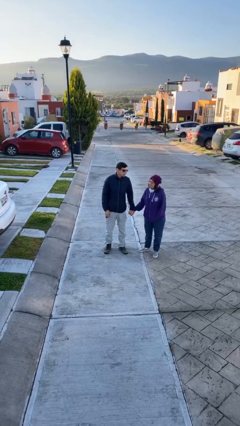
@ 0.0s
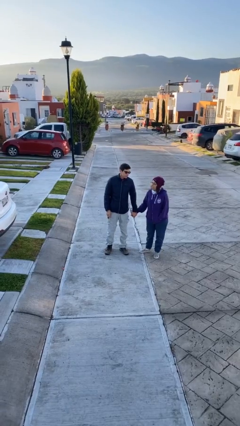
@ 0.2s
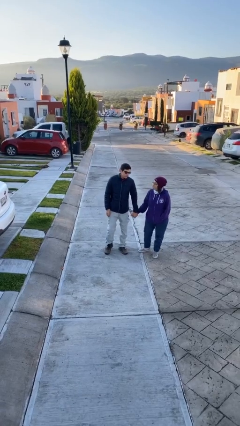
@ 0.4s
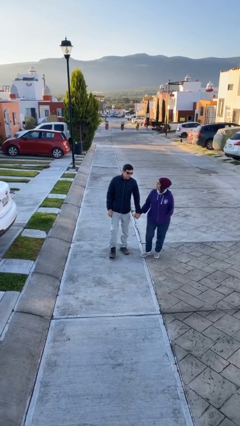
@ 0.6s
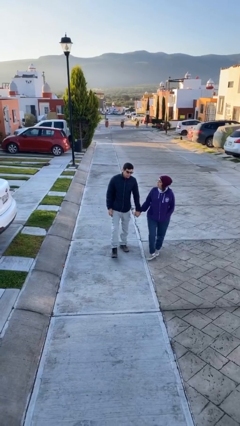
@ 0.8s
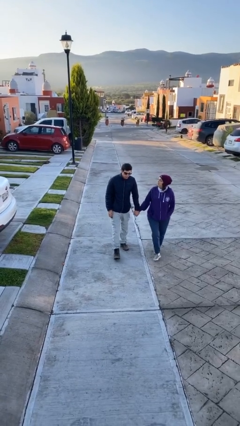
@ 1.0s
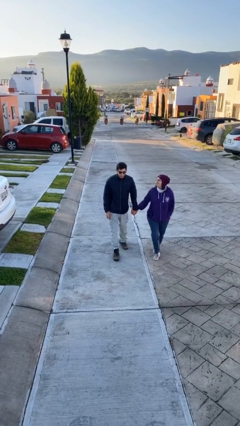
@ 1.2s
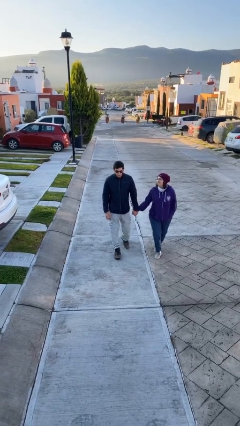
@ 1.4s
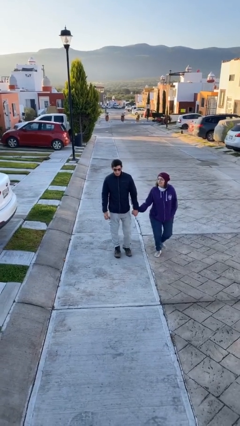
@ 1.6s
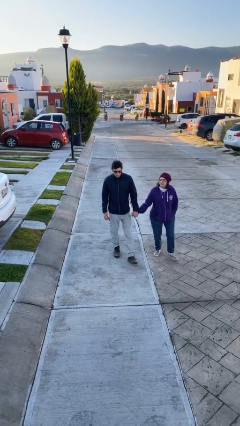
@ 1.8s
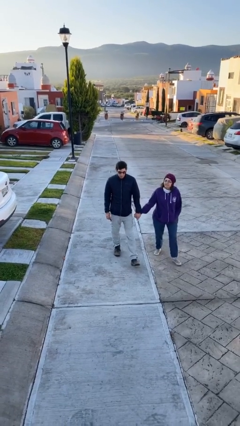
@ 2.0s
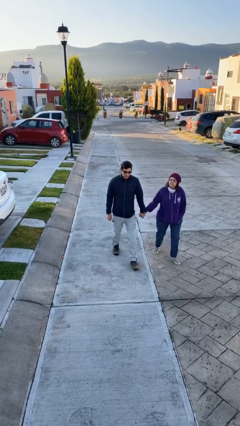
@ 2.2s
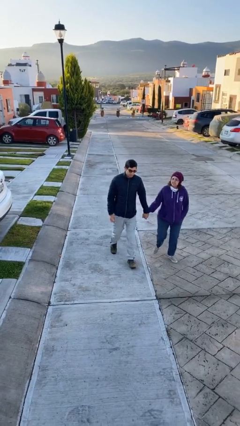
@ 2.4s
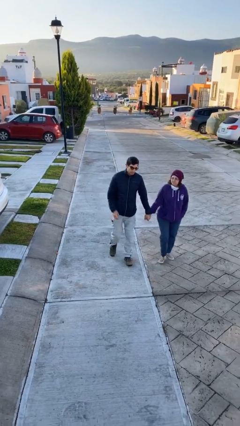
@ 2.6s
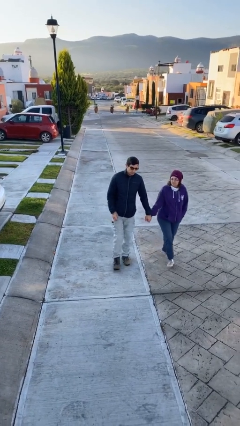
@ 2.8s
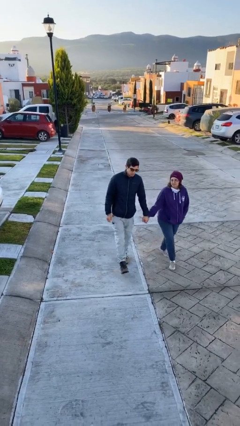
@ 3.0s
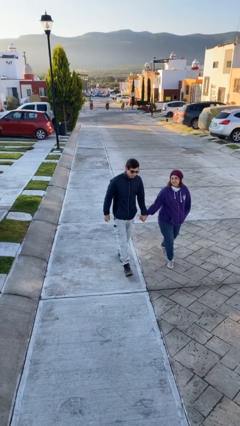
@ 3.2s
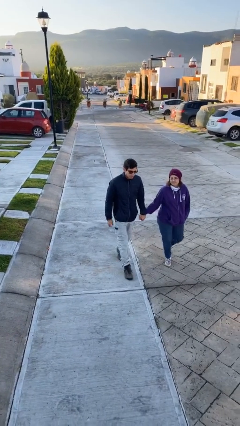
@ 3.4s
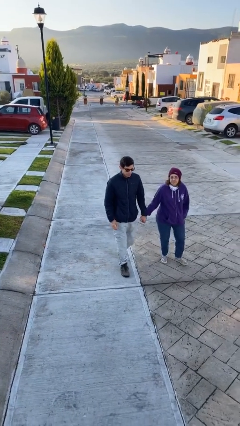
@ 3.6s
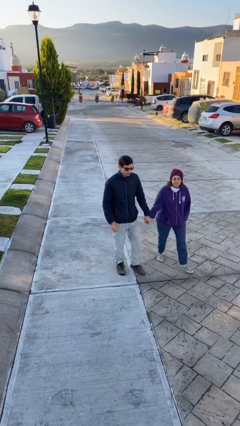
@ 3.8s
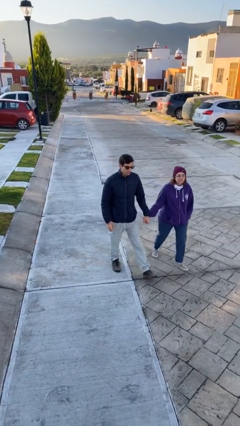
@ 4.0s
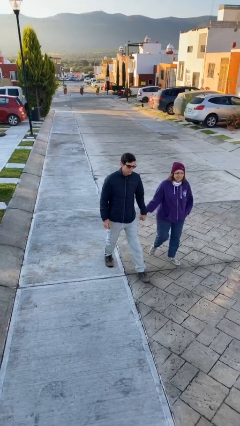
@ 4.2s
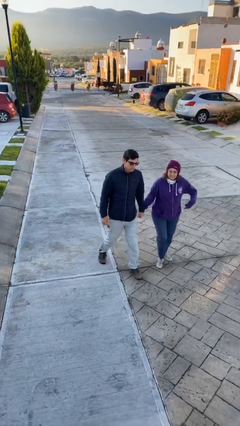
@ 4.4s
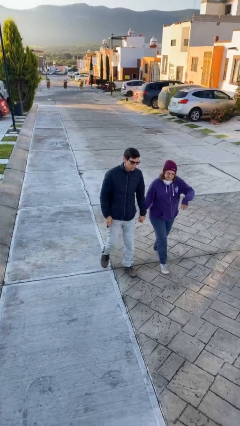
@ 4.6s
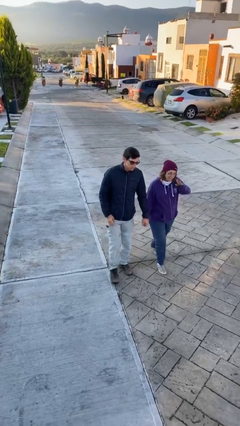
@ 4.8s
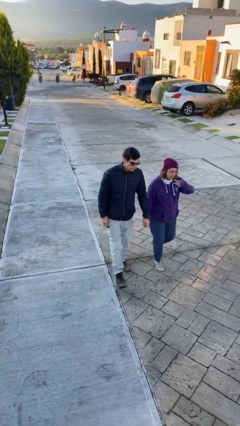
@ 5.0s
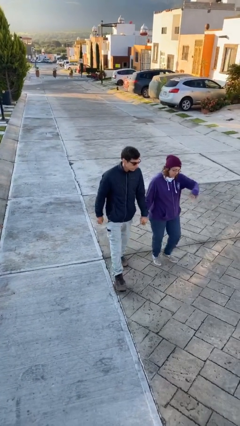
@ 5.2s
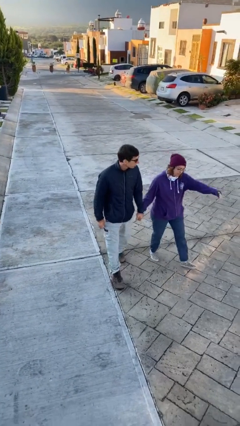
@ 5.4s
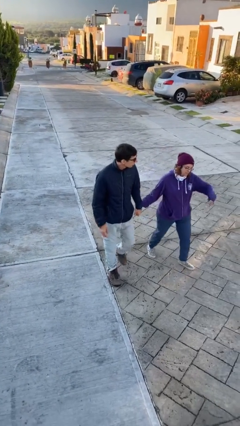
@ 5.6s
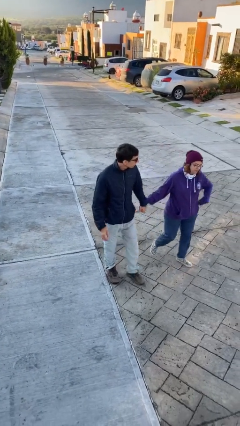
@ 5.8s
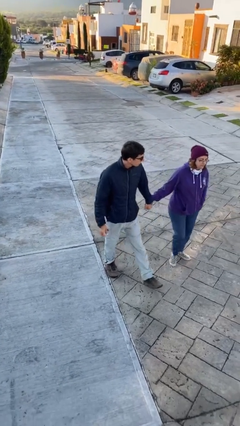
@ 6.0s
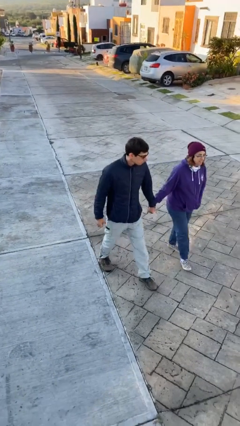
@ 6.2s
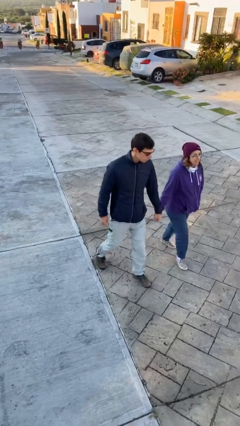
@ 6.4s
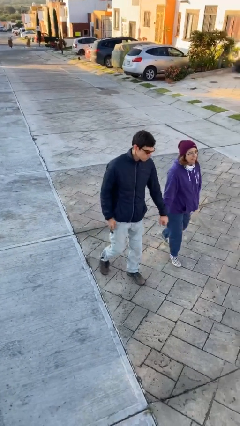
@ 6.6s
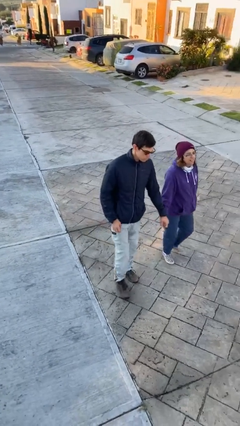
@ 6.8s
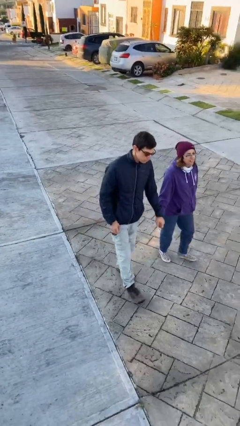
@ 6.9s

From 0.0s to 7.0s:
person holds hand

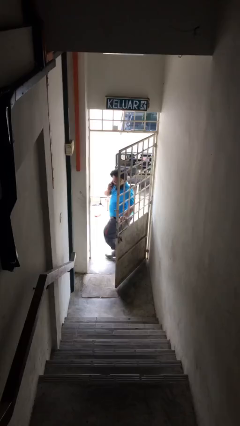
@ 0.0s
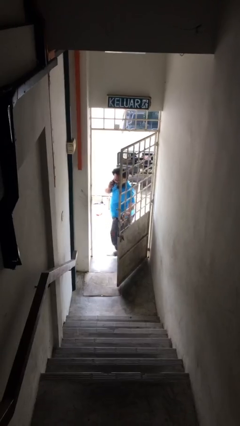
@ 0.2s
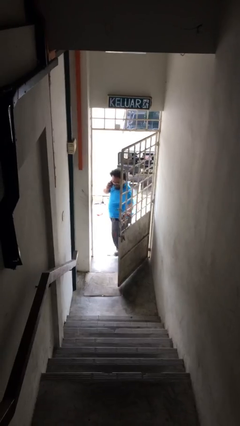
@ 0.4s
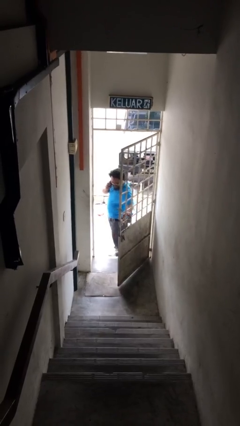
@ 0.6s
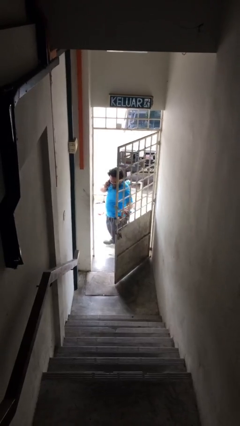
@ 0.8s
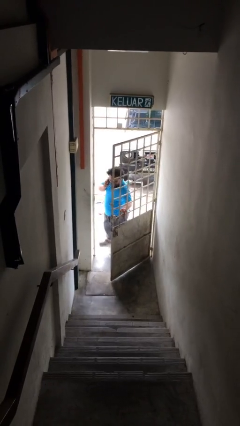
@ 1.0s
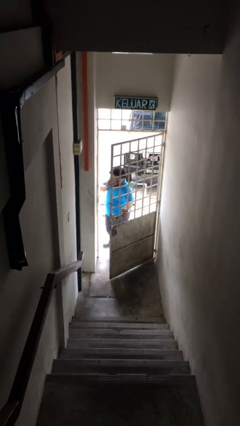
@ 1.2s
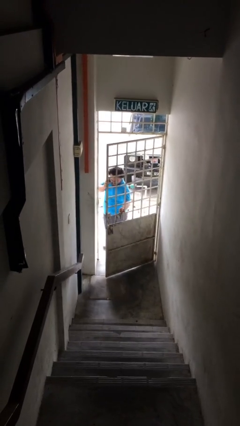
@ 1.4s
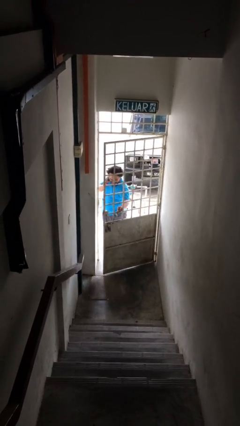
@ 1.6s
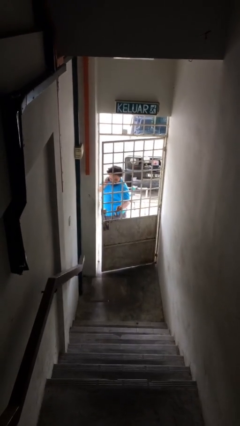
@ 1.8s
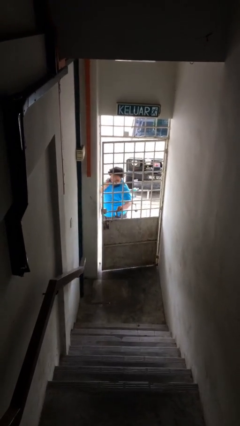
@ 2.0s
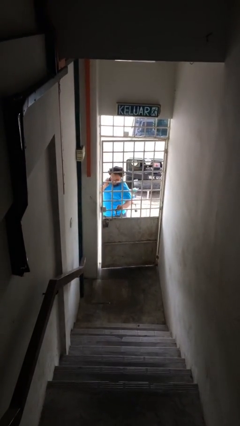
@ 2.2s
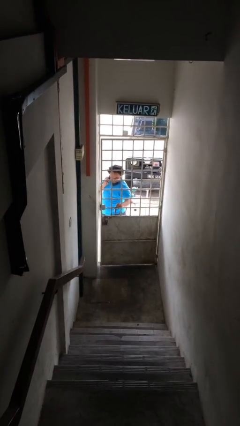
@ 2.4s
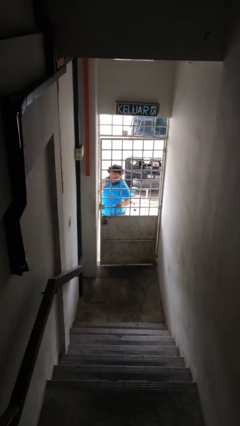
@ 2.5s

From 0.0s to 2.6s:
person closes facility door

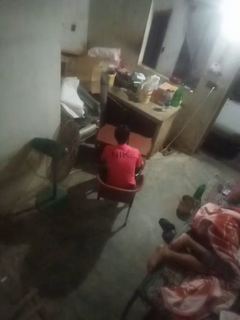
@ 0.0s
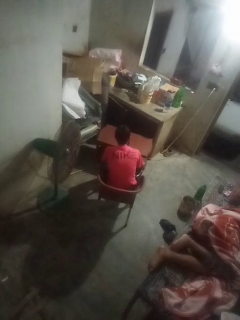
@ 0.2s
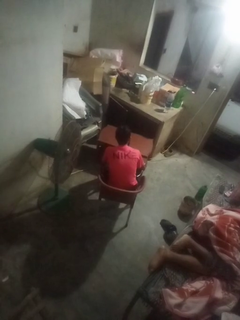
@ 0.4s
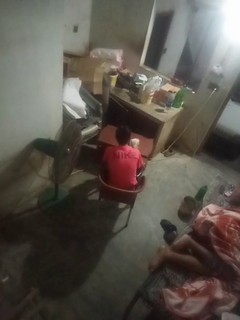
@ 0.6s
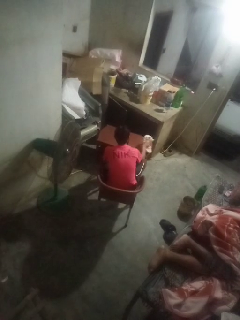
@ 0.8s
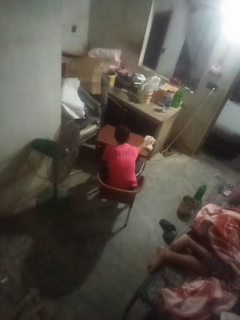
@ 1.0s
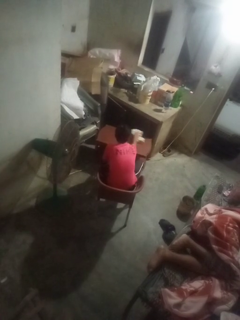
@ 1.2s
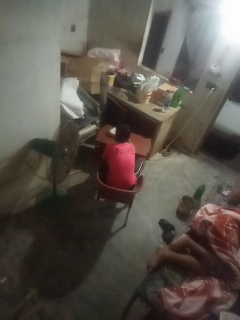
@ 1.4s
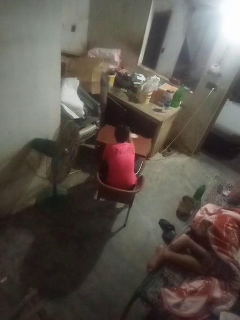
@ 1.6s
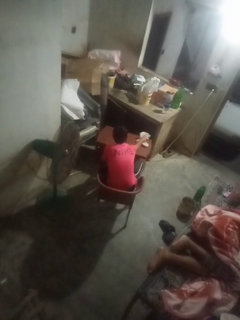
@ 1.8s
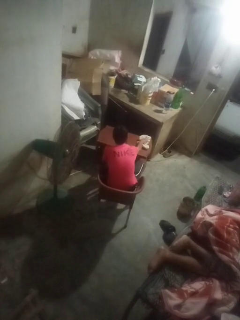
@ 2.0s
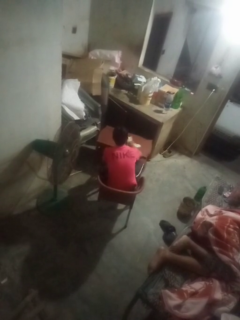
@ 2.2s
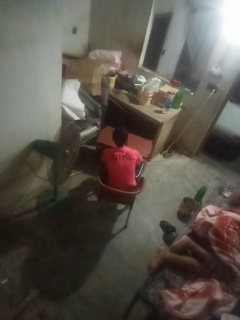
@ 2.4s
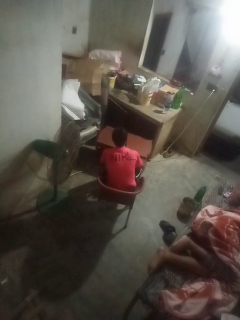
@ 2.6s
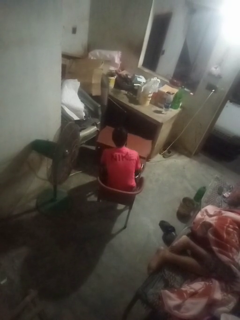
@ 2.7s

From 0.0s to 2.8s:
person cleans table with rag

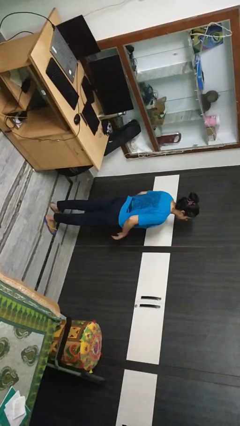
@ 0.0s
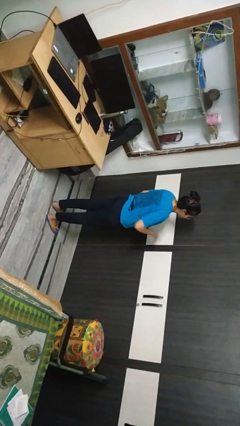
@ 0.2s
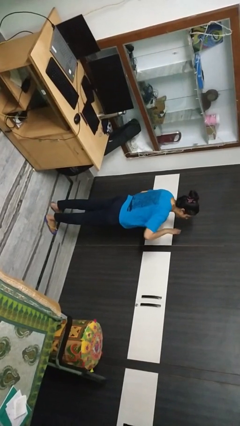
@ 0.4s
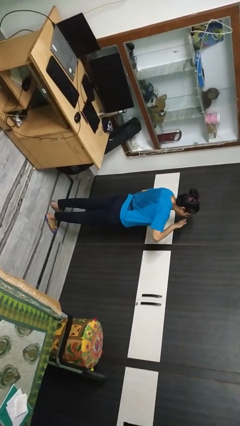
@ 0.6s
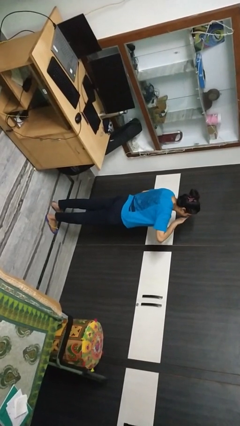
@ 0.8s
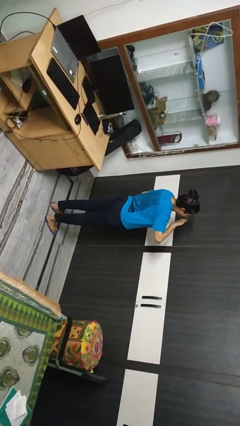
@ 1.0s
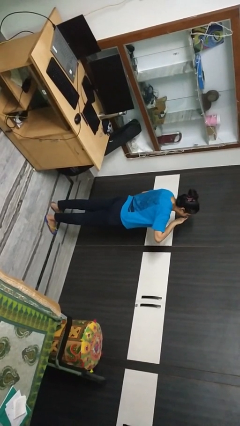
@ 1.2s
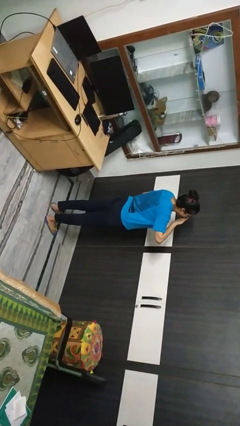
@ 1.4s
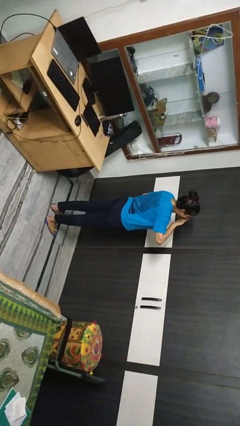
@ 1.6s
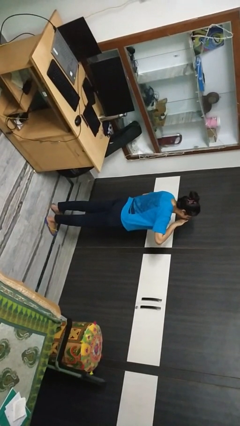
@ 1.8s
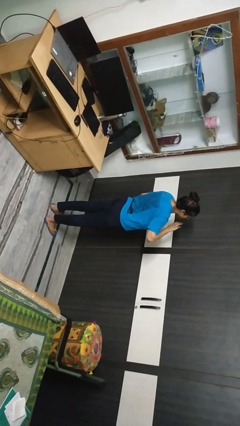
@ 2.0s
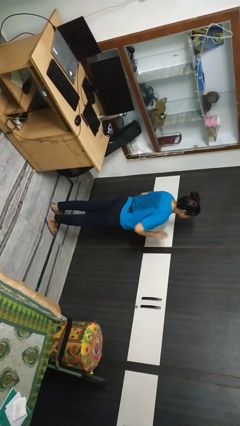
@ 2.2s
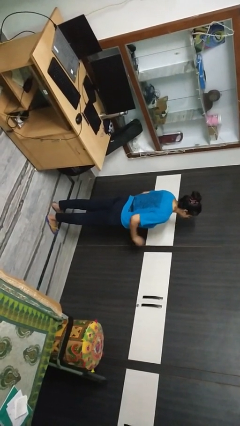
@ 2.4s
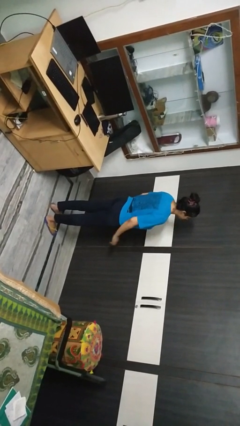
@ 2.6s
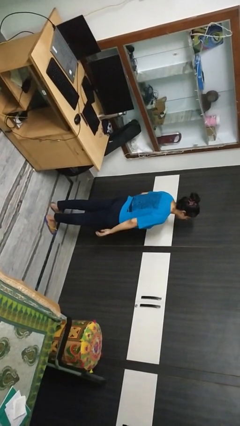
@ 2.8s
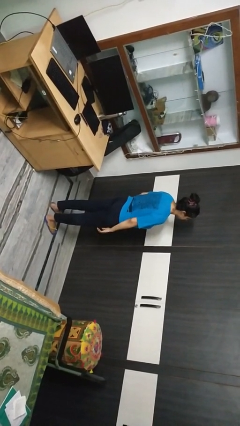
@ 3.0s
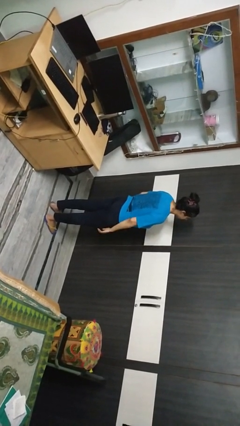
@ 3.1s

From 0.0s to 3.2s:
person yawns

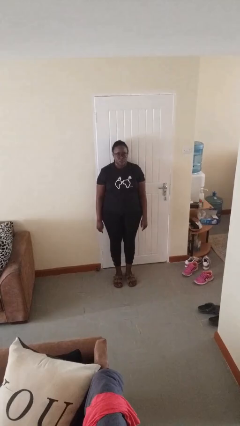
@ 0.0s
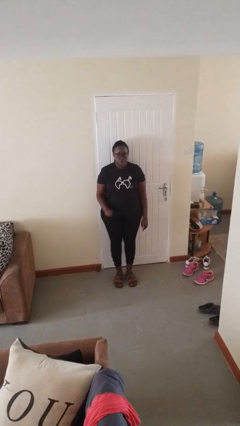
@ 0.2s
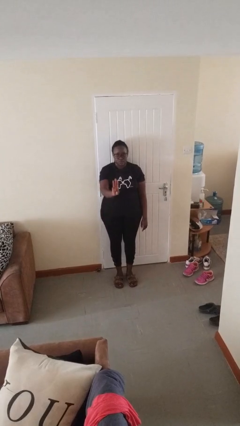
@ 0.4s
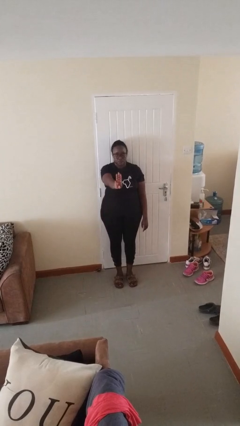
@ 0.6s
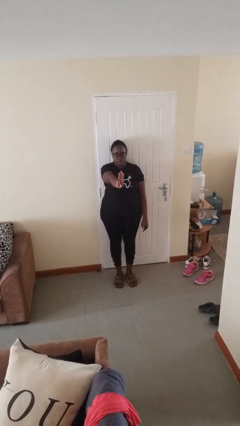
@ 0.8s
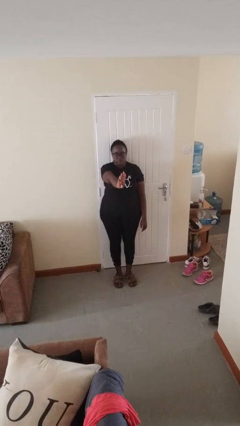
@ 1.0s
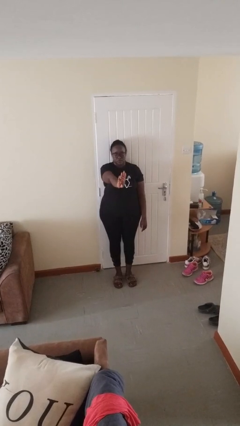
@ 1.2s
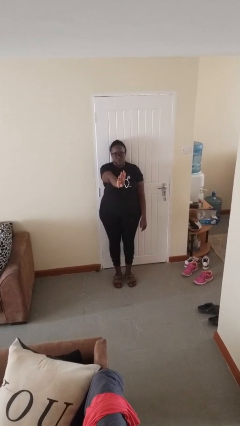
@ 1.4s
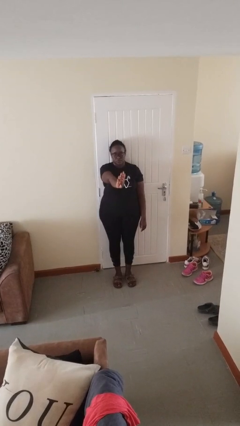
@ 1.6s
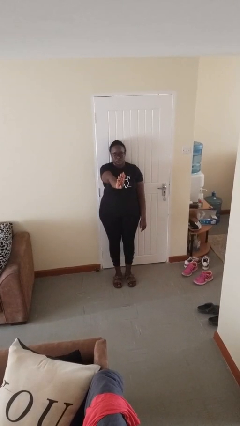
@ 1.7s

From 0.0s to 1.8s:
person gestures number three

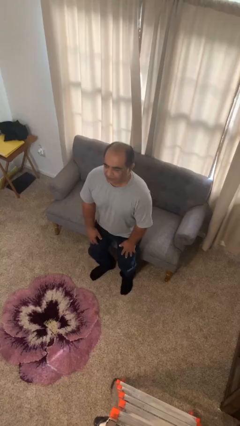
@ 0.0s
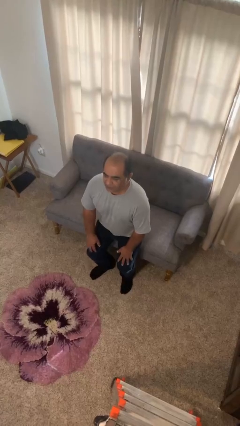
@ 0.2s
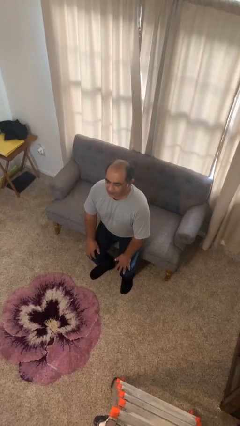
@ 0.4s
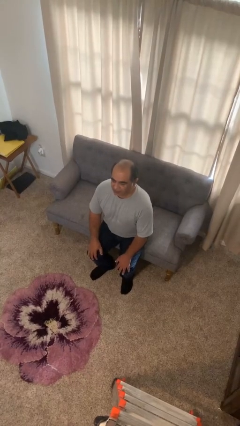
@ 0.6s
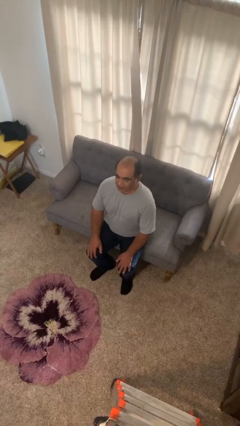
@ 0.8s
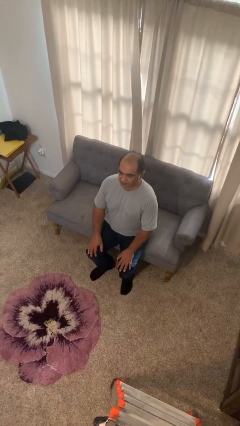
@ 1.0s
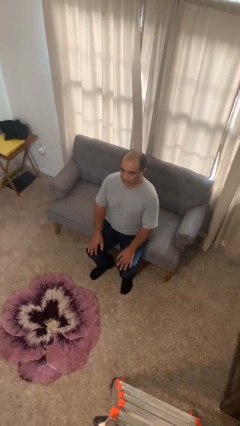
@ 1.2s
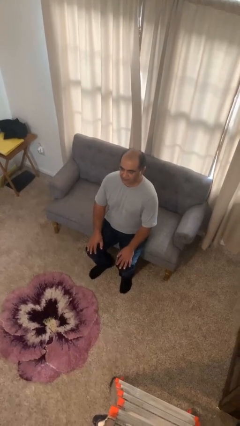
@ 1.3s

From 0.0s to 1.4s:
person sits down
